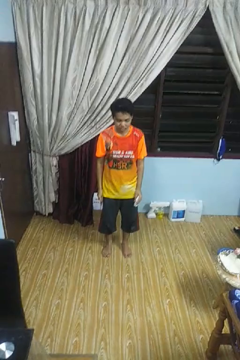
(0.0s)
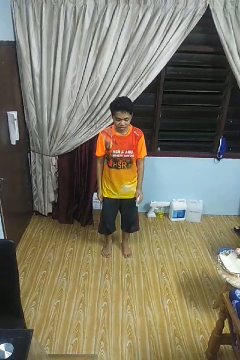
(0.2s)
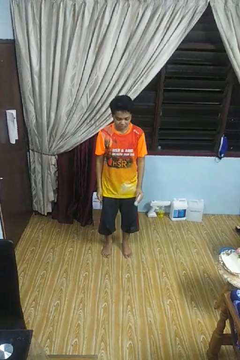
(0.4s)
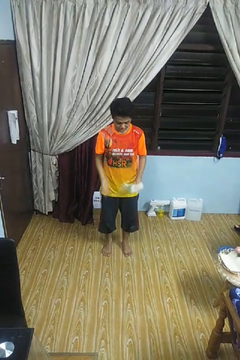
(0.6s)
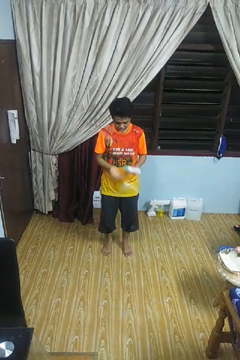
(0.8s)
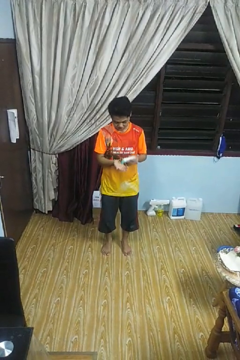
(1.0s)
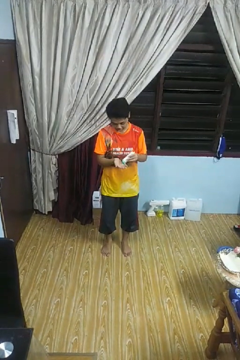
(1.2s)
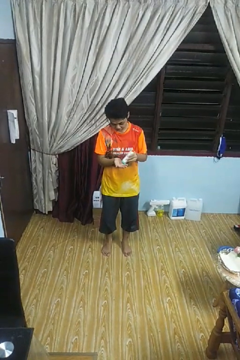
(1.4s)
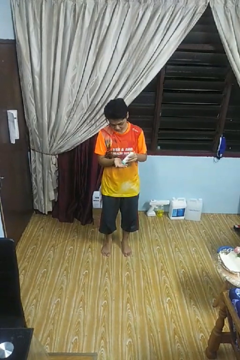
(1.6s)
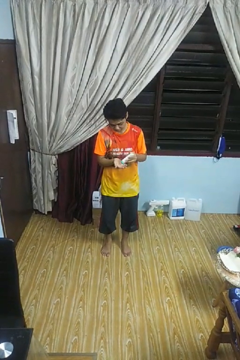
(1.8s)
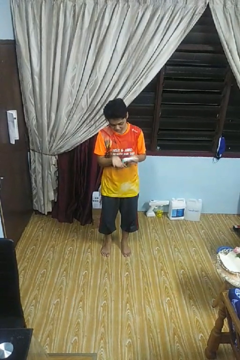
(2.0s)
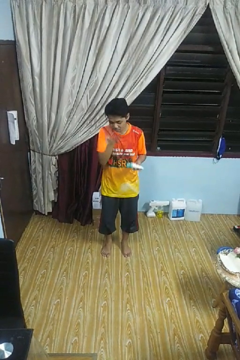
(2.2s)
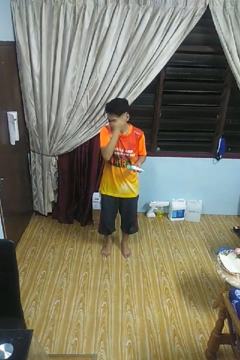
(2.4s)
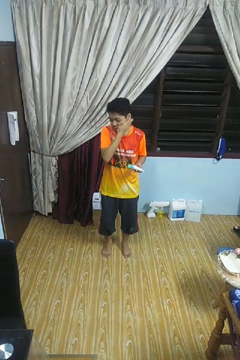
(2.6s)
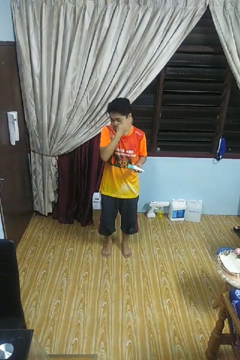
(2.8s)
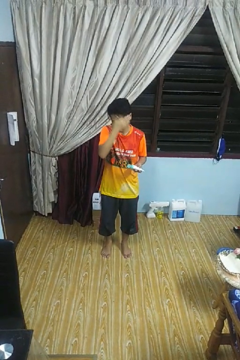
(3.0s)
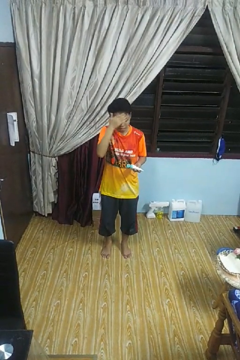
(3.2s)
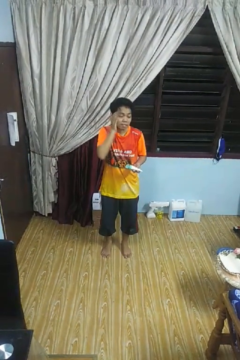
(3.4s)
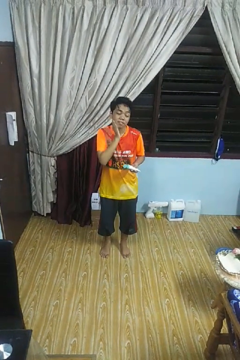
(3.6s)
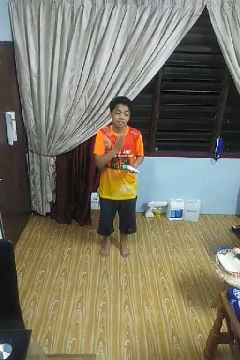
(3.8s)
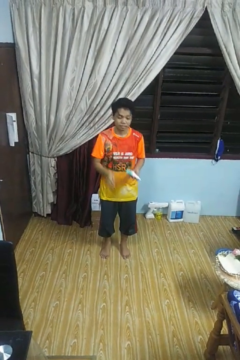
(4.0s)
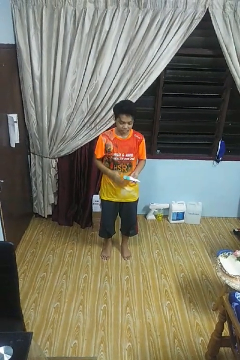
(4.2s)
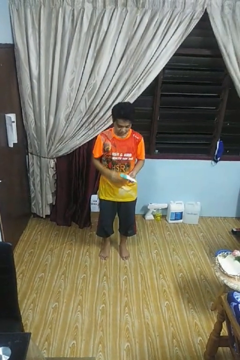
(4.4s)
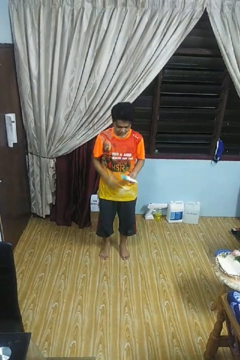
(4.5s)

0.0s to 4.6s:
person applies facial moisturizer

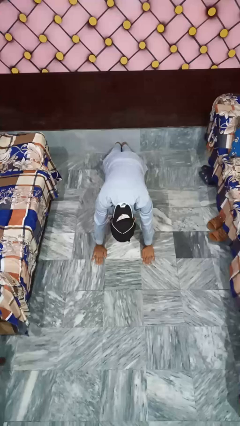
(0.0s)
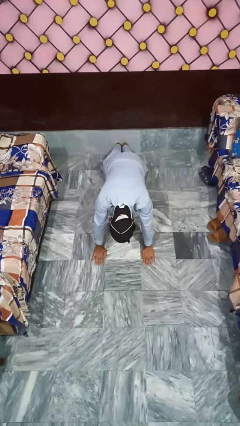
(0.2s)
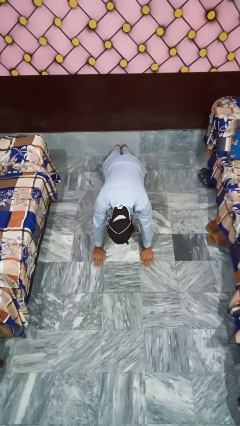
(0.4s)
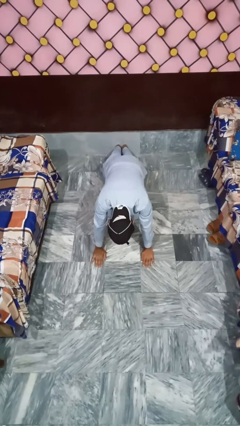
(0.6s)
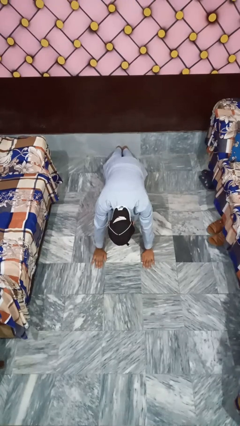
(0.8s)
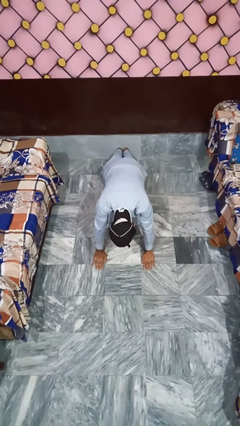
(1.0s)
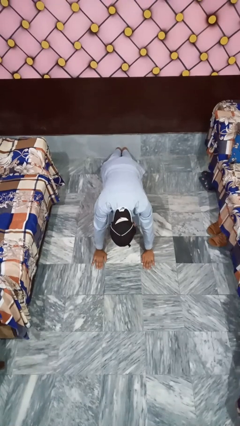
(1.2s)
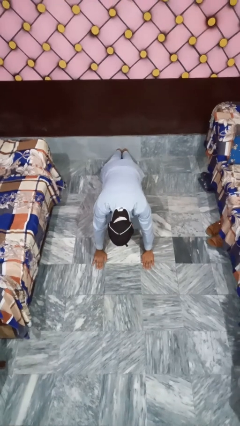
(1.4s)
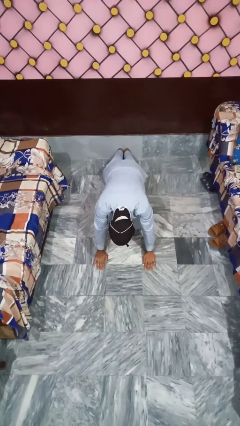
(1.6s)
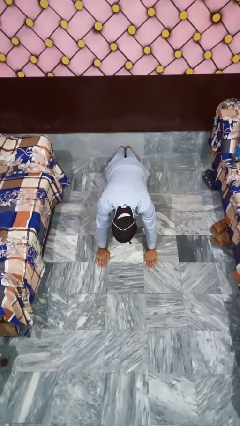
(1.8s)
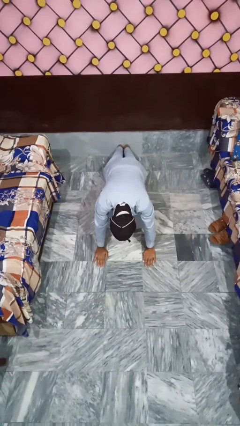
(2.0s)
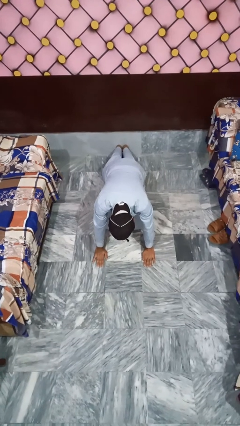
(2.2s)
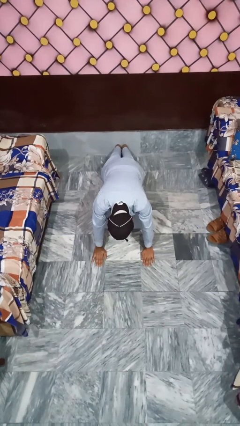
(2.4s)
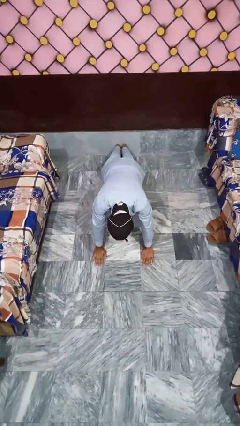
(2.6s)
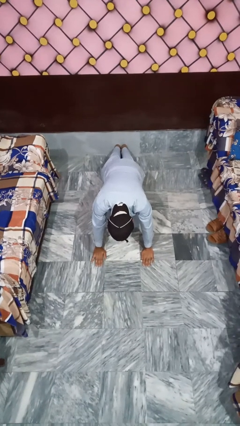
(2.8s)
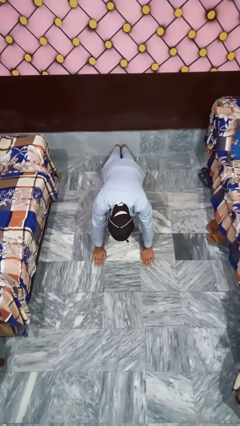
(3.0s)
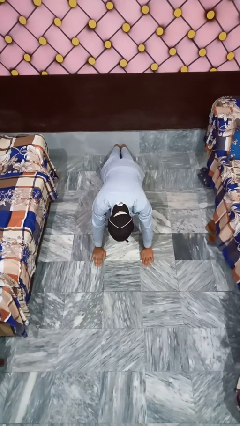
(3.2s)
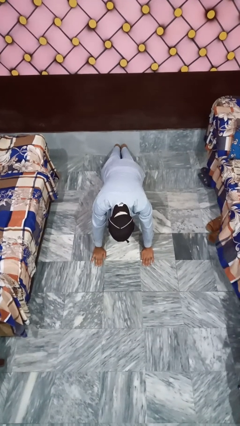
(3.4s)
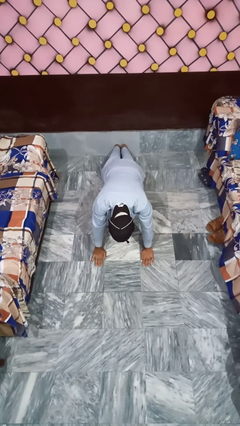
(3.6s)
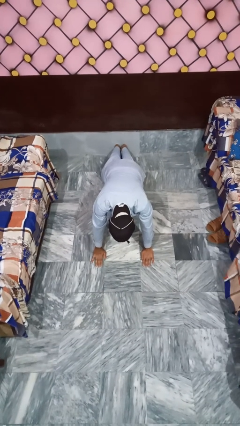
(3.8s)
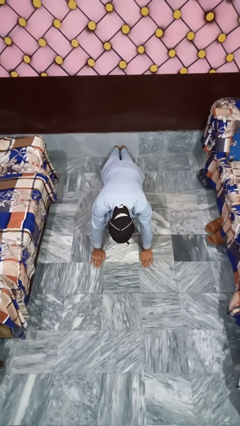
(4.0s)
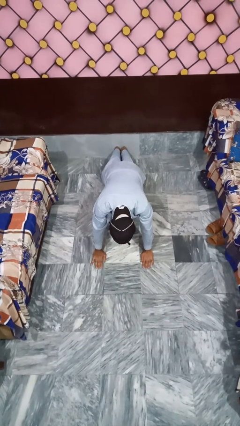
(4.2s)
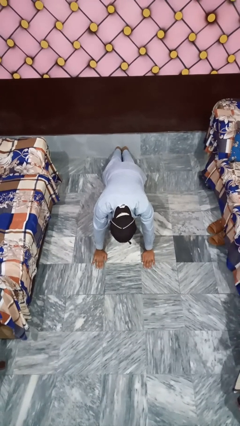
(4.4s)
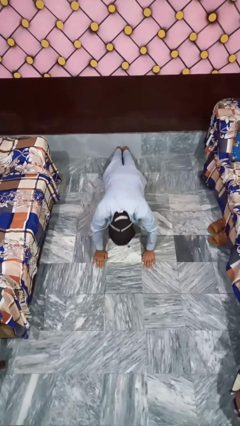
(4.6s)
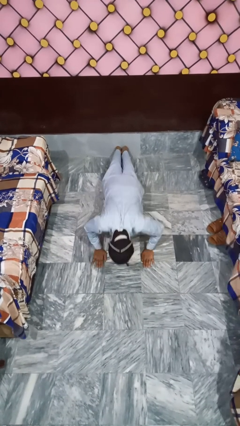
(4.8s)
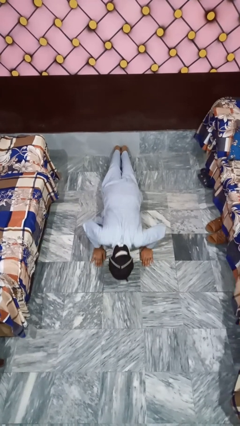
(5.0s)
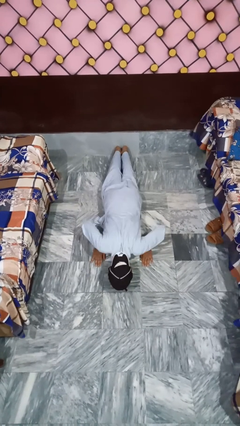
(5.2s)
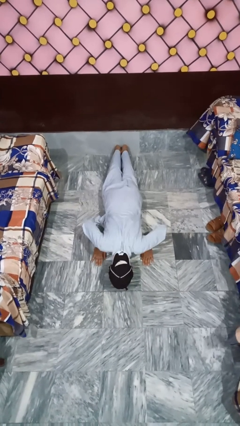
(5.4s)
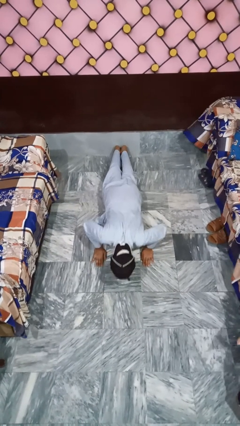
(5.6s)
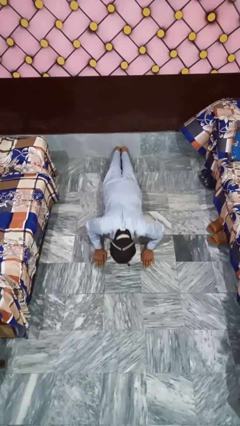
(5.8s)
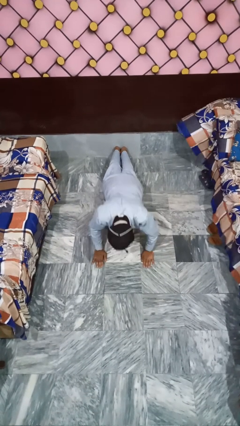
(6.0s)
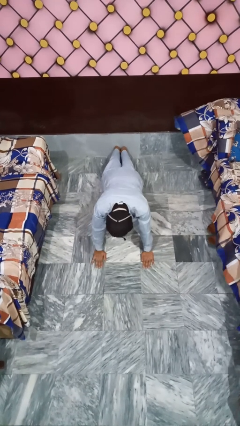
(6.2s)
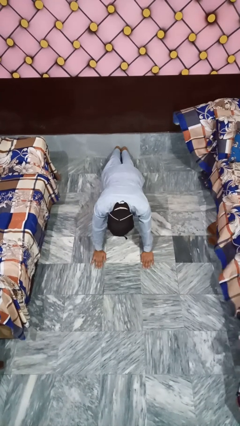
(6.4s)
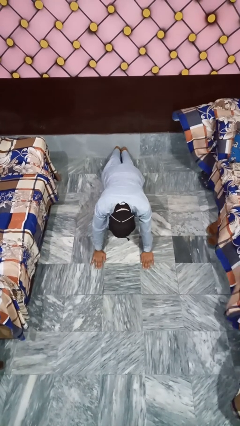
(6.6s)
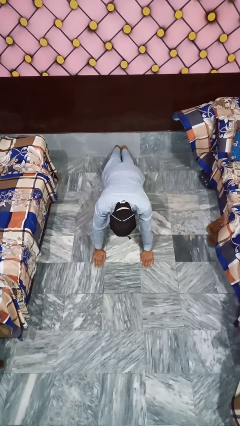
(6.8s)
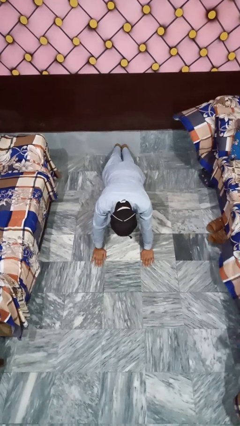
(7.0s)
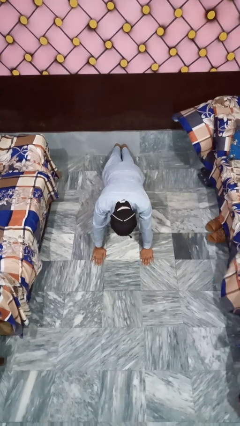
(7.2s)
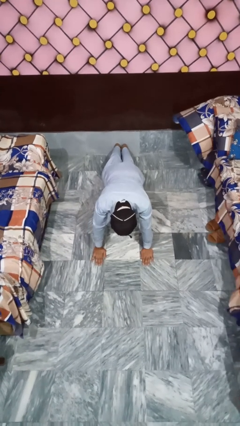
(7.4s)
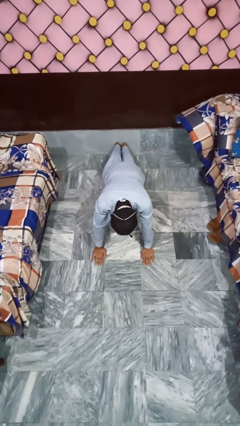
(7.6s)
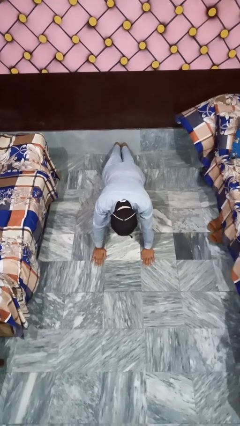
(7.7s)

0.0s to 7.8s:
person exercises with pushup

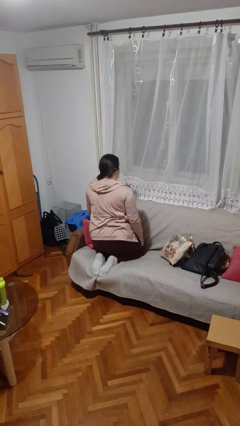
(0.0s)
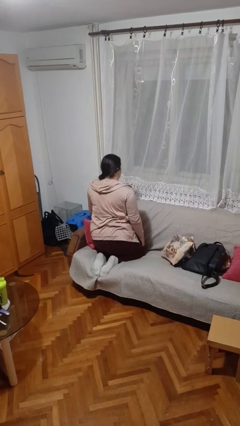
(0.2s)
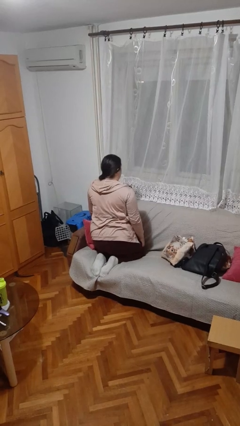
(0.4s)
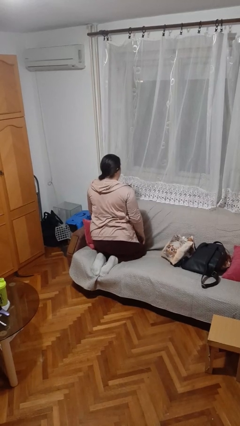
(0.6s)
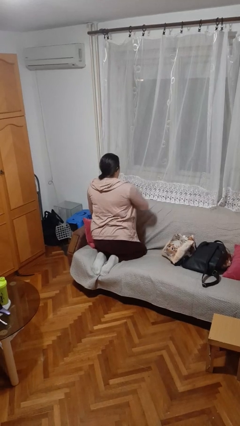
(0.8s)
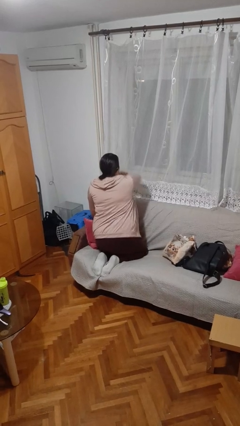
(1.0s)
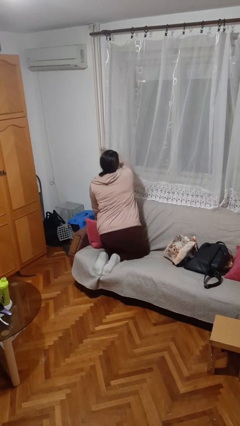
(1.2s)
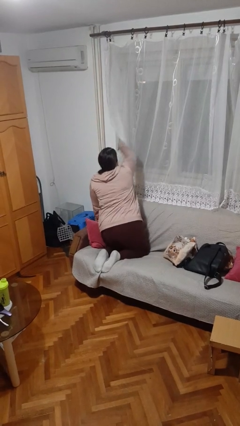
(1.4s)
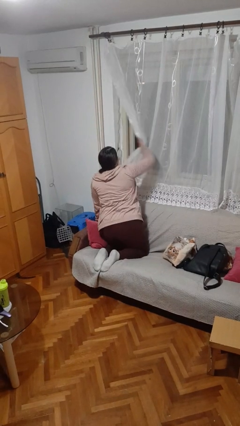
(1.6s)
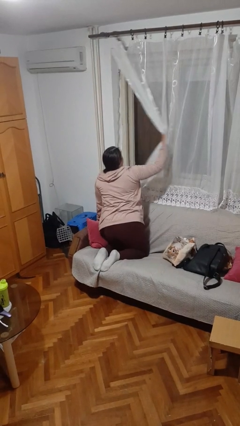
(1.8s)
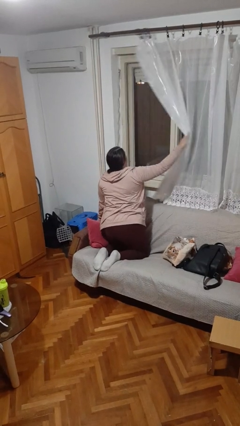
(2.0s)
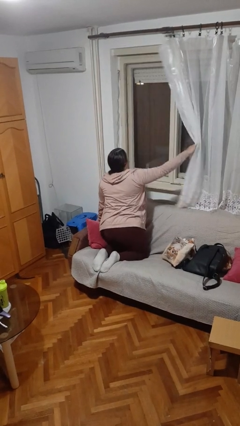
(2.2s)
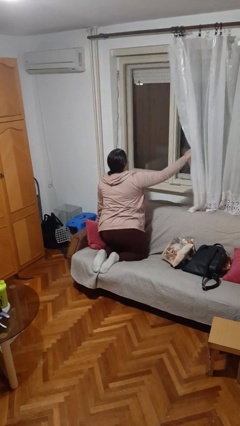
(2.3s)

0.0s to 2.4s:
person opens curtains

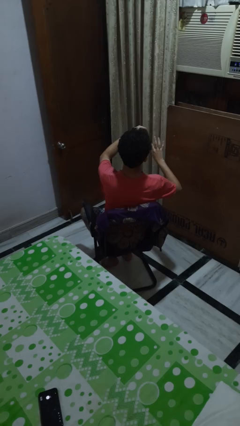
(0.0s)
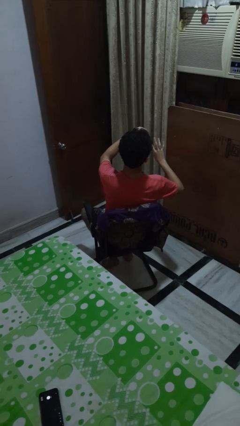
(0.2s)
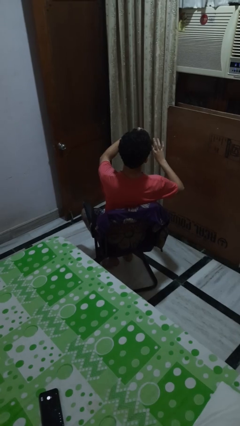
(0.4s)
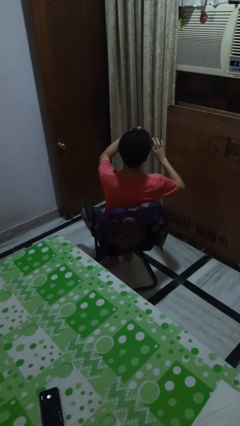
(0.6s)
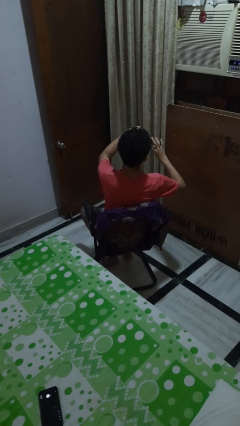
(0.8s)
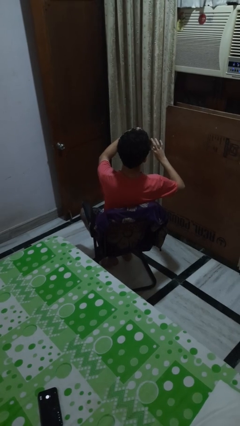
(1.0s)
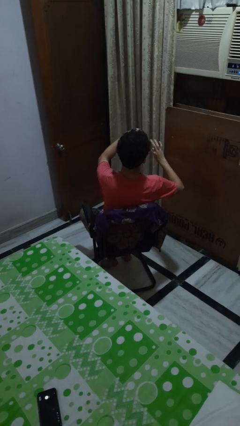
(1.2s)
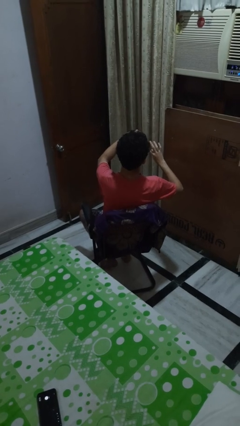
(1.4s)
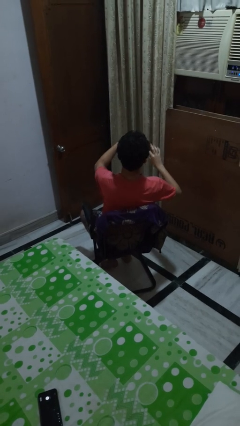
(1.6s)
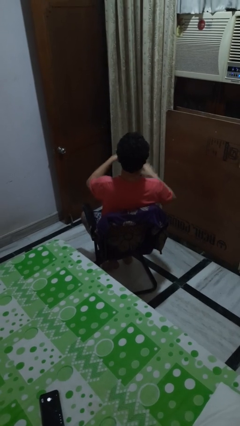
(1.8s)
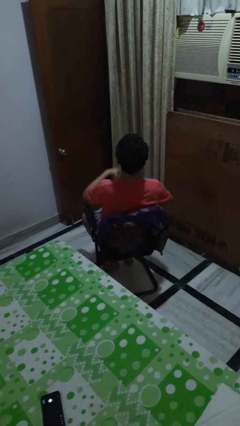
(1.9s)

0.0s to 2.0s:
person clips fingernails

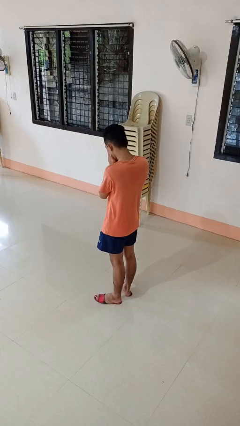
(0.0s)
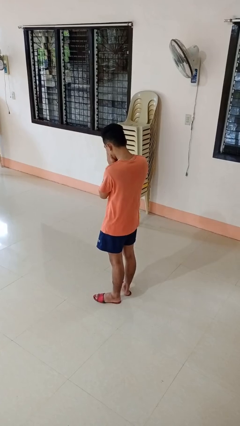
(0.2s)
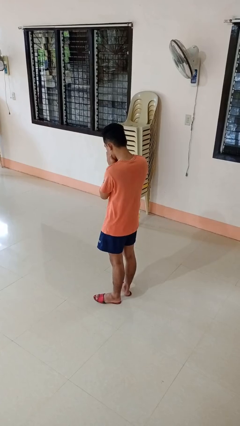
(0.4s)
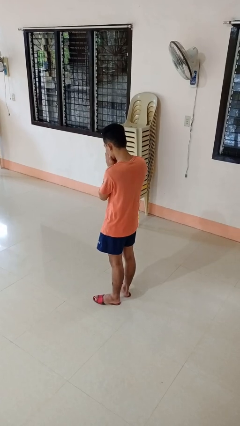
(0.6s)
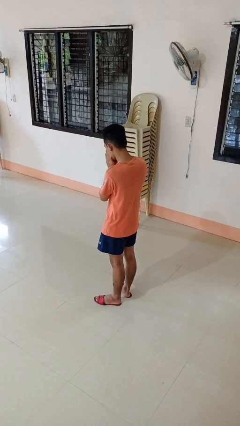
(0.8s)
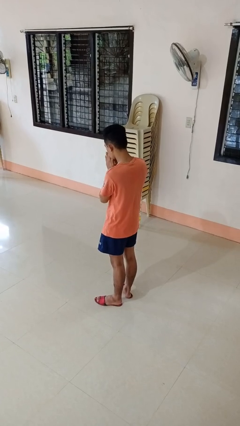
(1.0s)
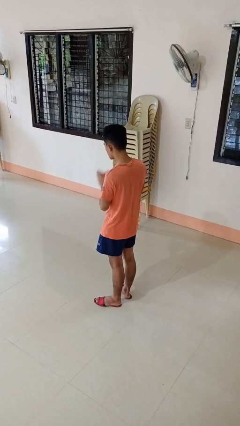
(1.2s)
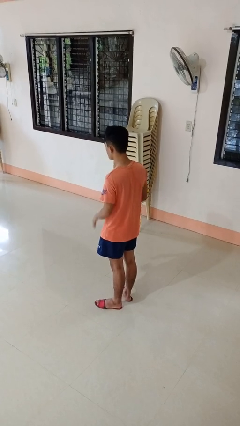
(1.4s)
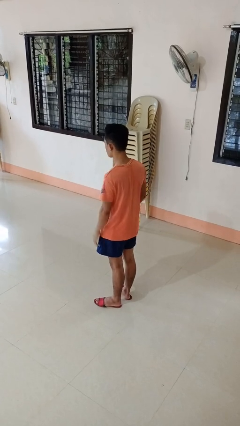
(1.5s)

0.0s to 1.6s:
person sneezes into hand
